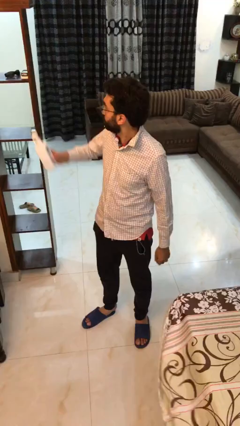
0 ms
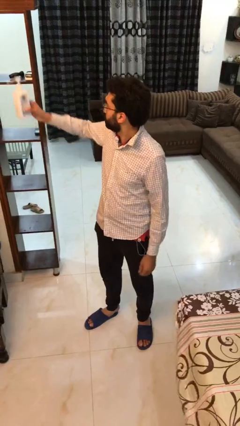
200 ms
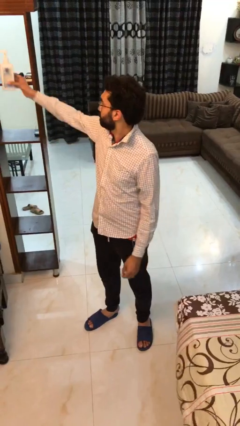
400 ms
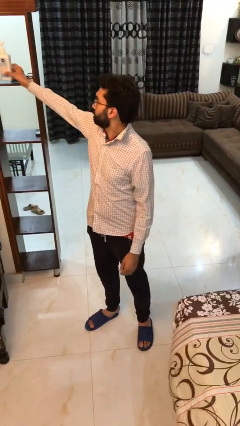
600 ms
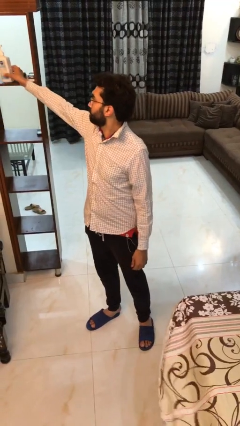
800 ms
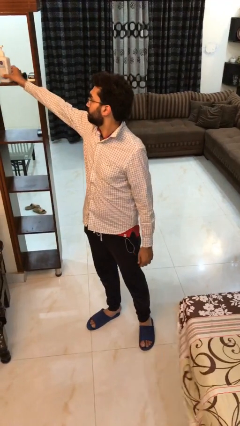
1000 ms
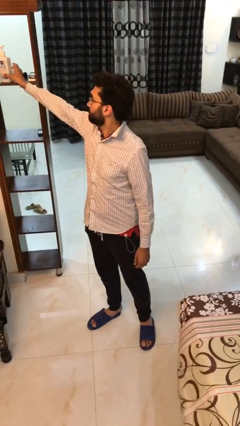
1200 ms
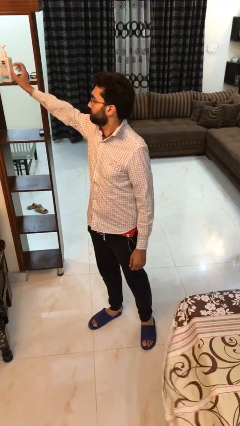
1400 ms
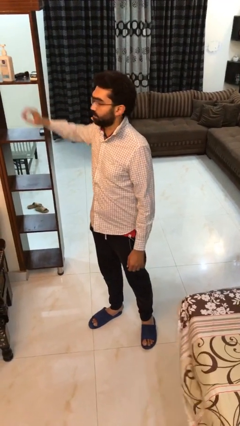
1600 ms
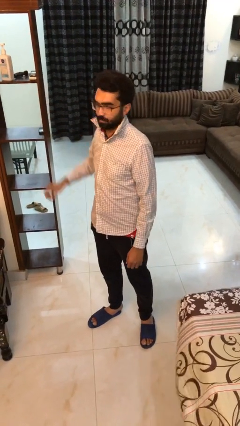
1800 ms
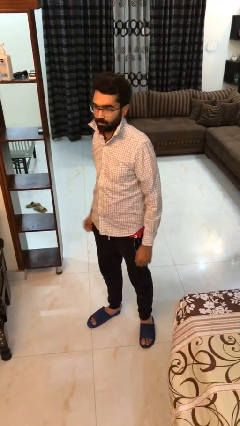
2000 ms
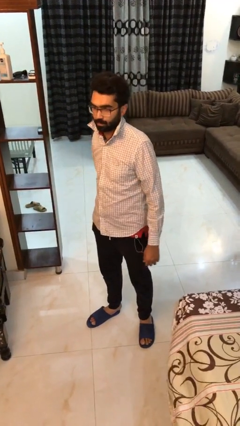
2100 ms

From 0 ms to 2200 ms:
person puts down object on shelf

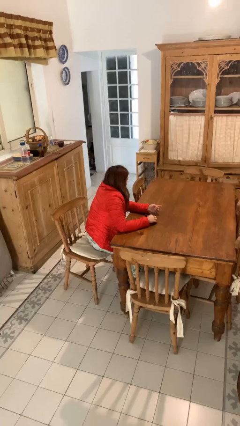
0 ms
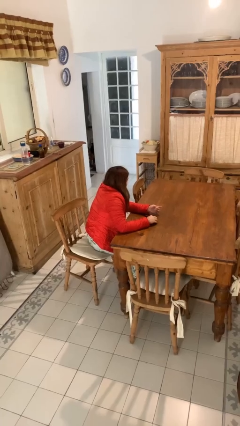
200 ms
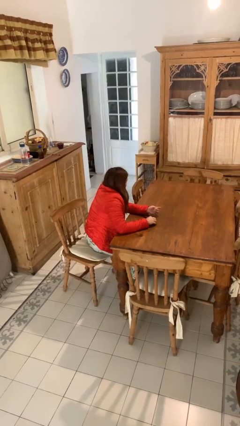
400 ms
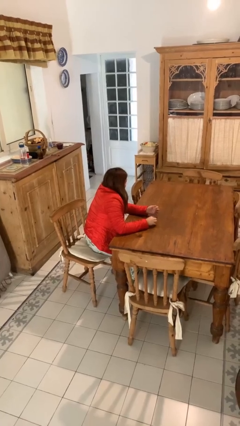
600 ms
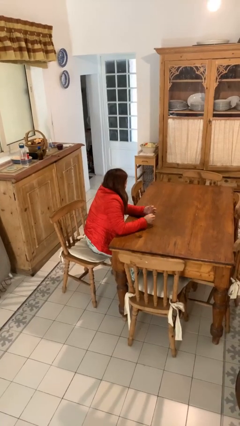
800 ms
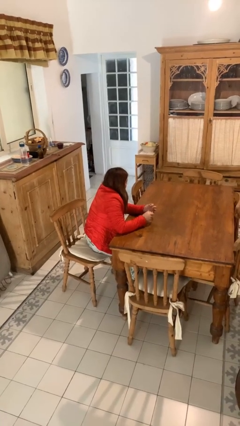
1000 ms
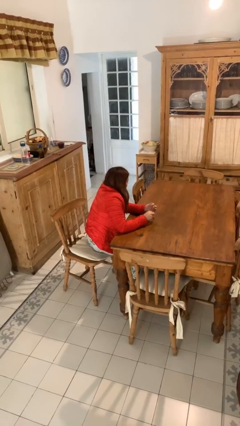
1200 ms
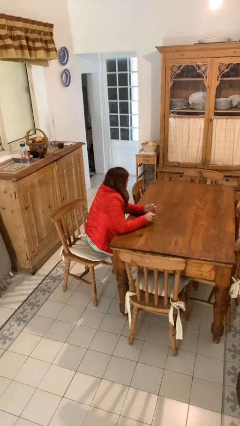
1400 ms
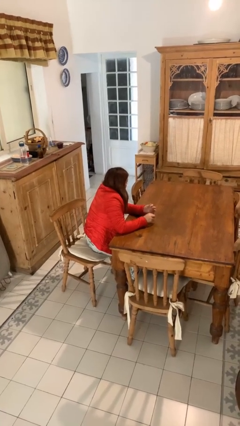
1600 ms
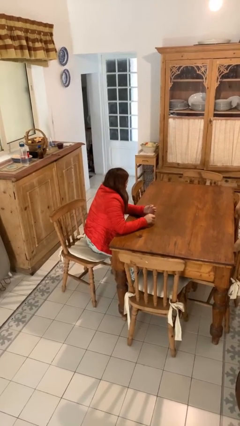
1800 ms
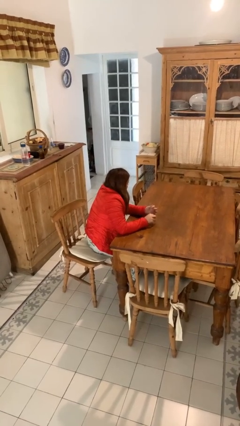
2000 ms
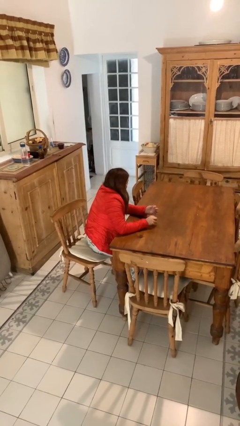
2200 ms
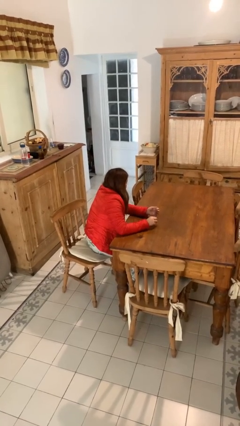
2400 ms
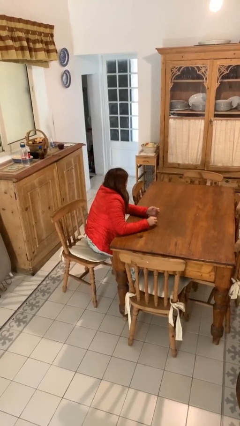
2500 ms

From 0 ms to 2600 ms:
person files fingernails

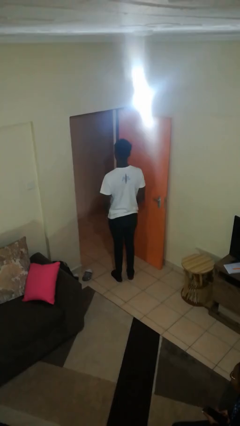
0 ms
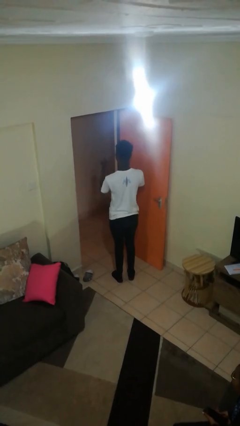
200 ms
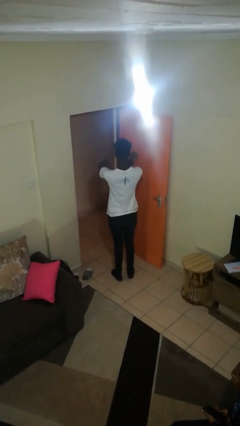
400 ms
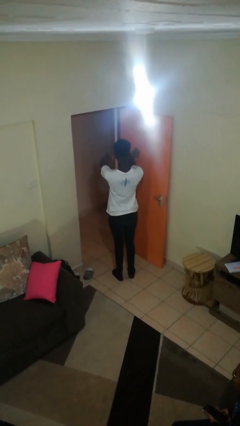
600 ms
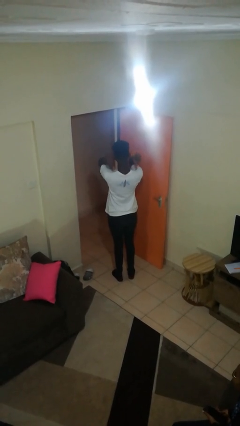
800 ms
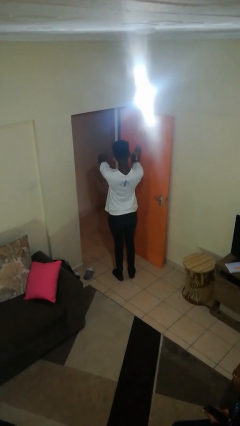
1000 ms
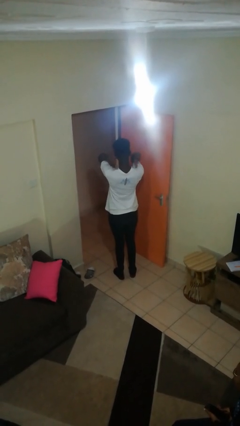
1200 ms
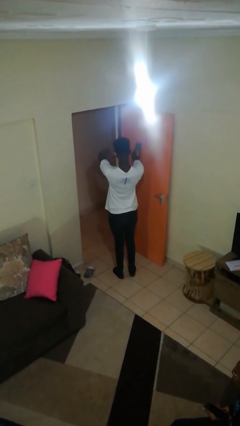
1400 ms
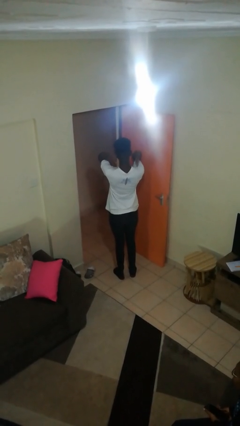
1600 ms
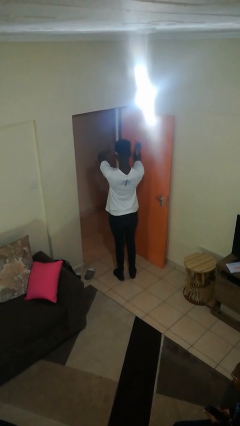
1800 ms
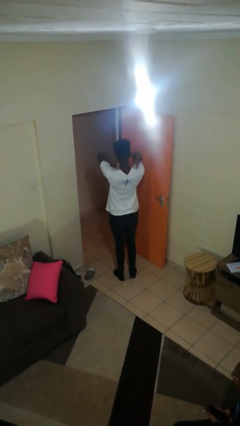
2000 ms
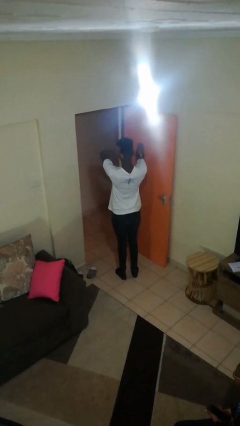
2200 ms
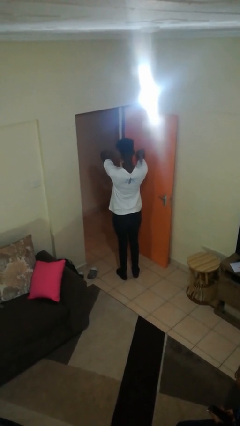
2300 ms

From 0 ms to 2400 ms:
person gestures behind me

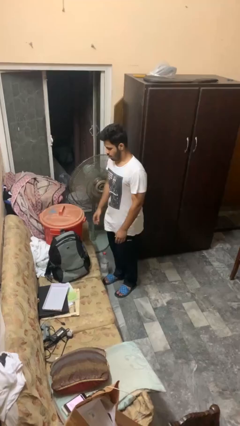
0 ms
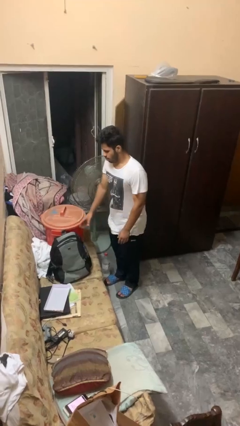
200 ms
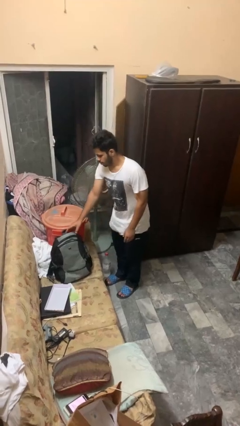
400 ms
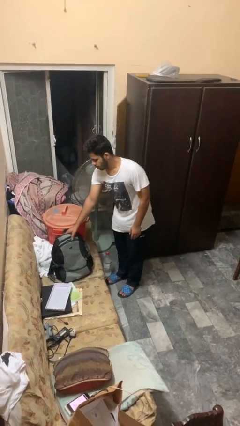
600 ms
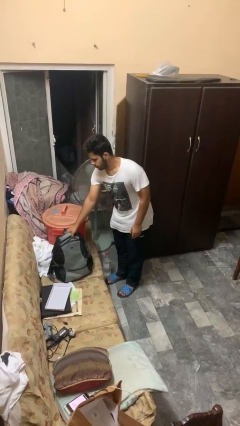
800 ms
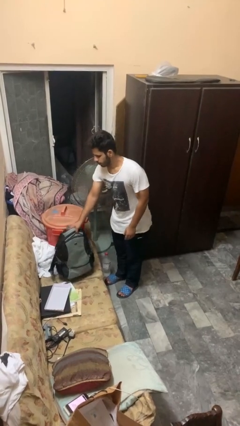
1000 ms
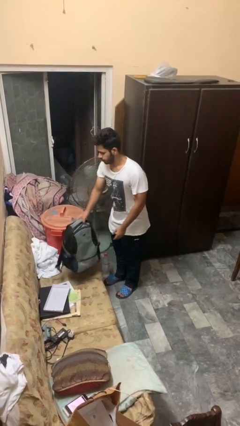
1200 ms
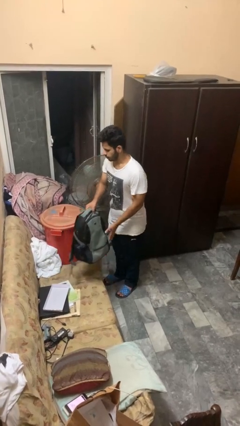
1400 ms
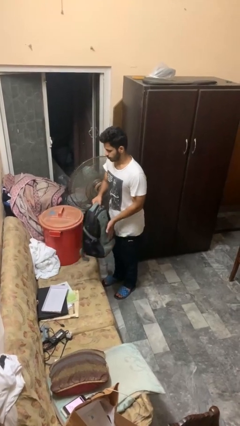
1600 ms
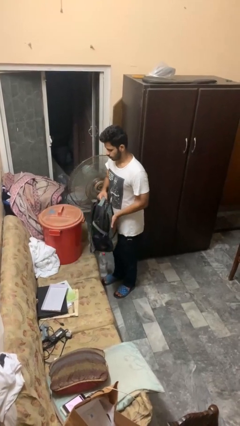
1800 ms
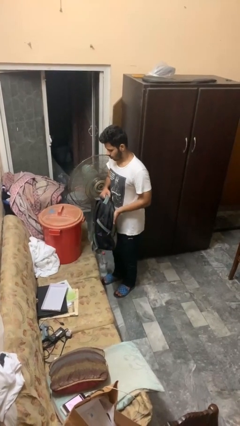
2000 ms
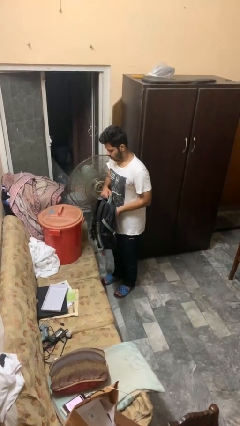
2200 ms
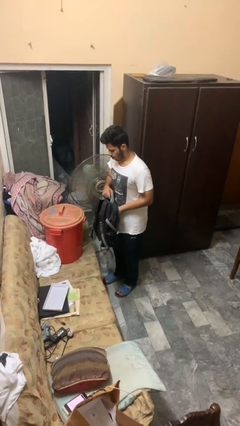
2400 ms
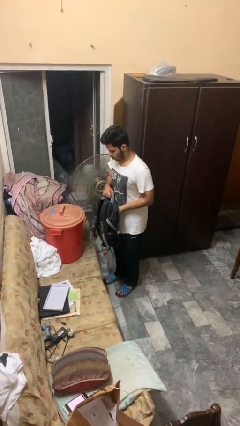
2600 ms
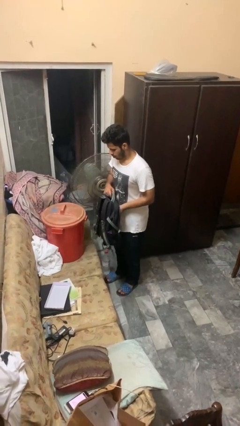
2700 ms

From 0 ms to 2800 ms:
person picks up object from couch

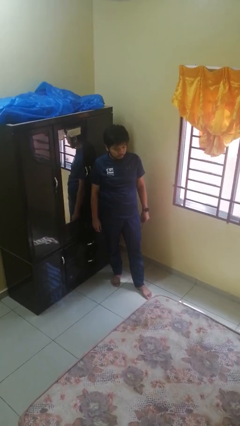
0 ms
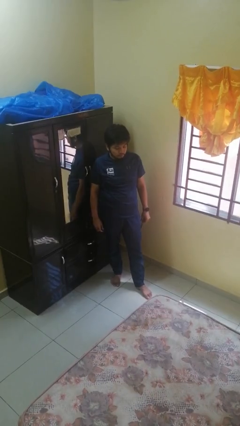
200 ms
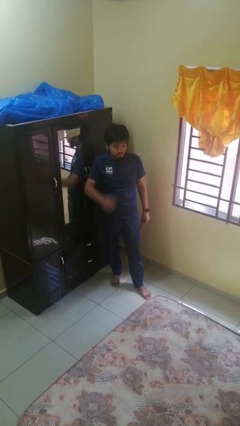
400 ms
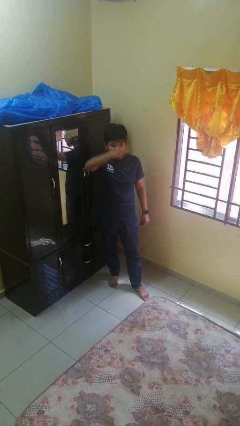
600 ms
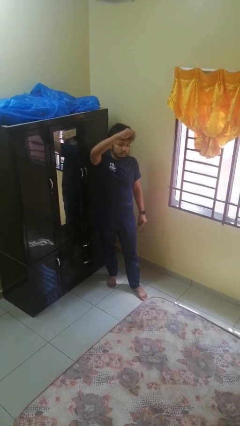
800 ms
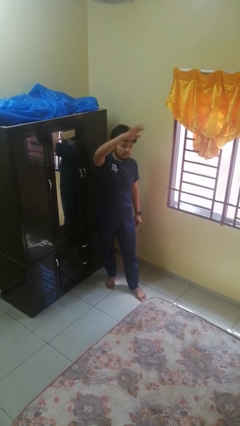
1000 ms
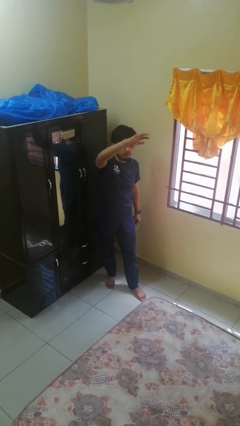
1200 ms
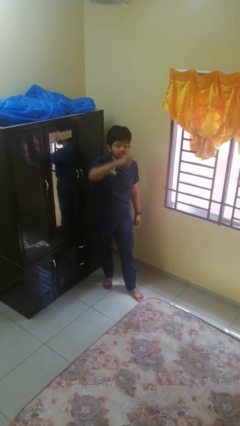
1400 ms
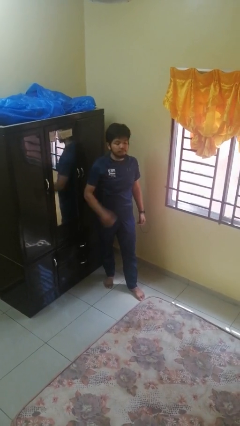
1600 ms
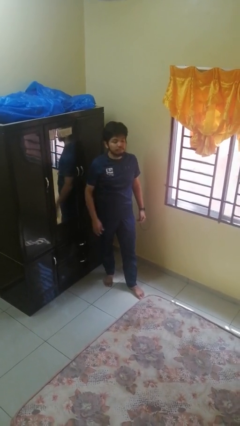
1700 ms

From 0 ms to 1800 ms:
person gestures come here

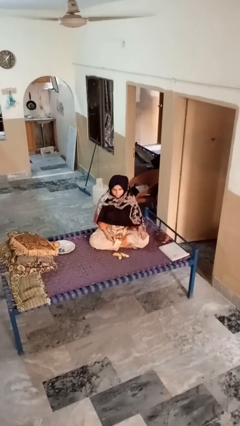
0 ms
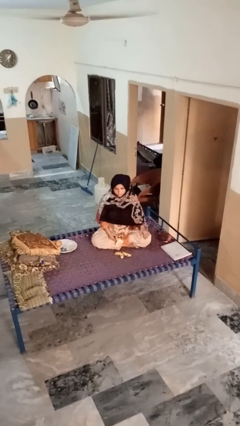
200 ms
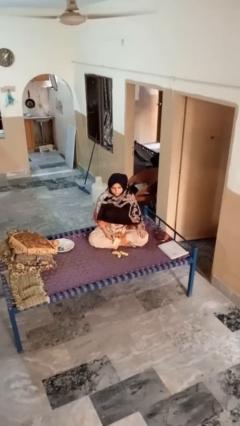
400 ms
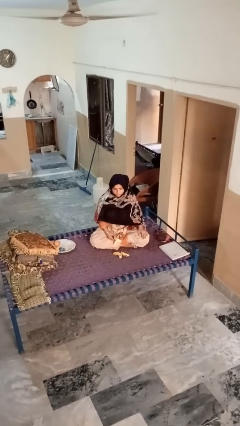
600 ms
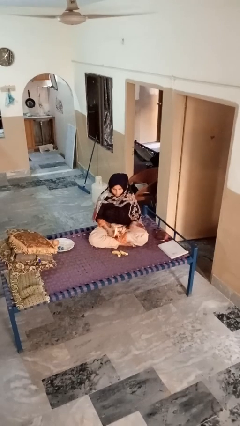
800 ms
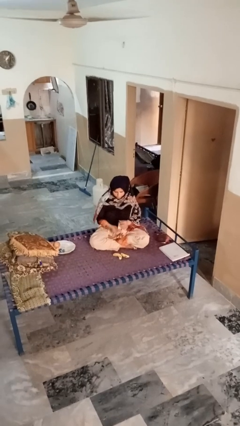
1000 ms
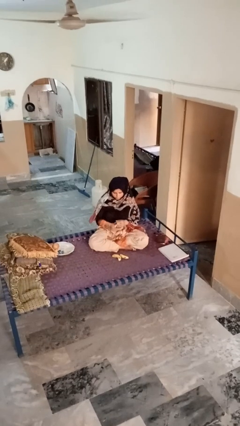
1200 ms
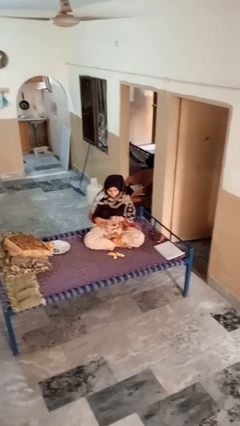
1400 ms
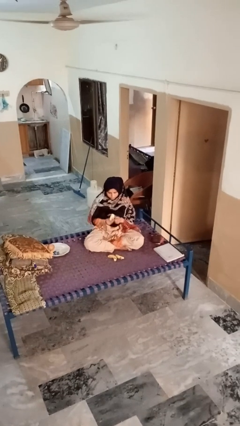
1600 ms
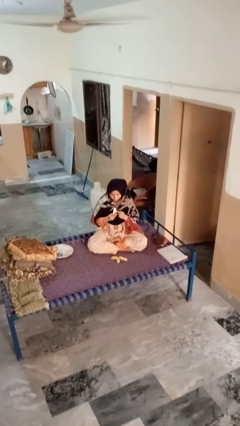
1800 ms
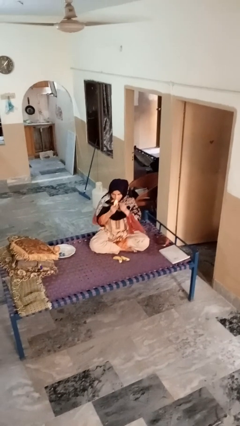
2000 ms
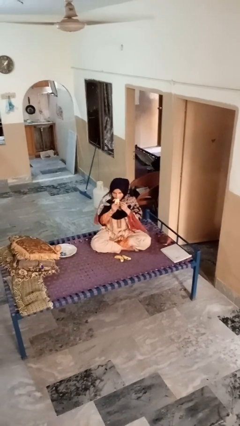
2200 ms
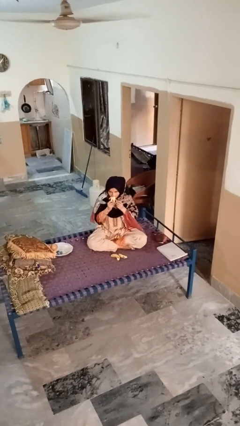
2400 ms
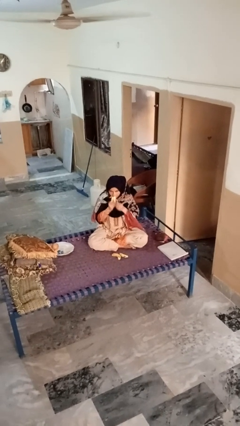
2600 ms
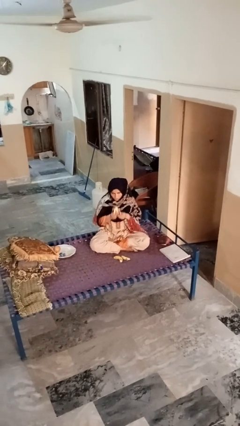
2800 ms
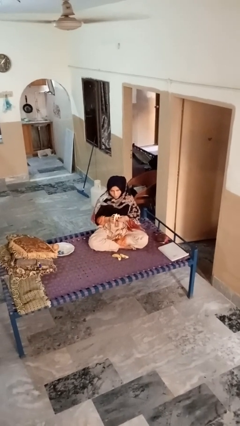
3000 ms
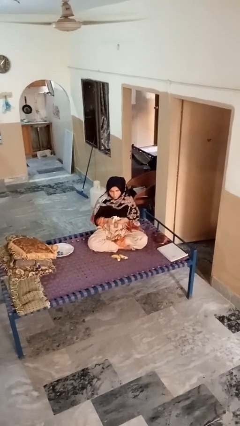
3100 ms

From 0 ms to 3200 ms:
person eats banana

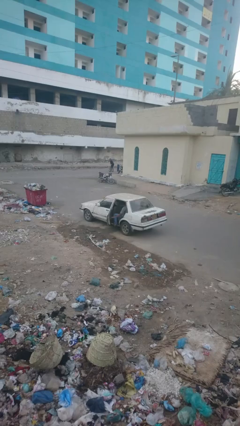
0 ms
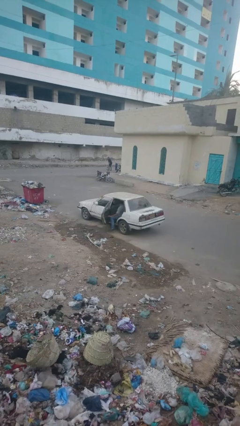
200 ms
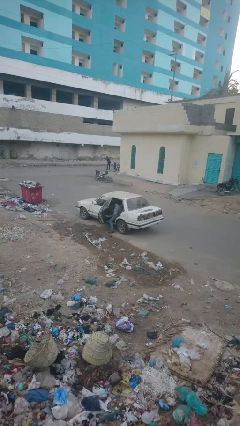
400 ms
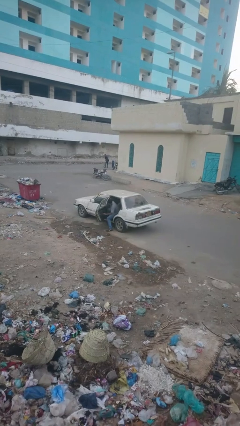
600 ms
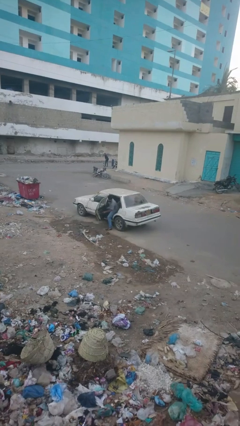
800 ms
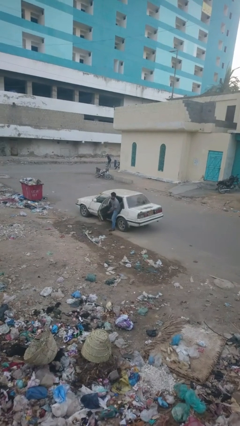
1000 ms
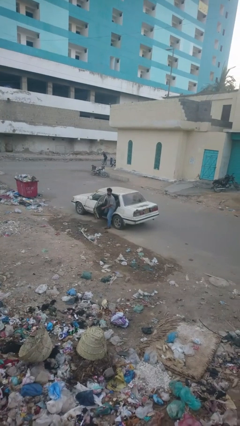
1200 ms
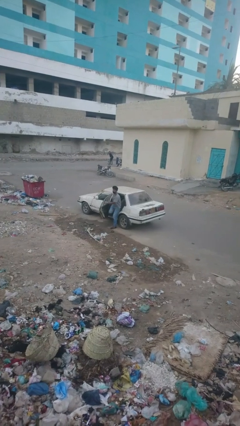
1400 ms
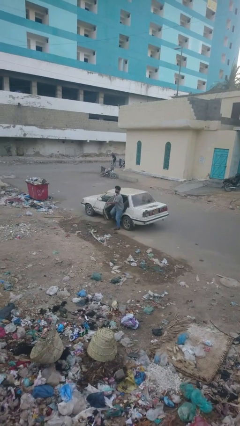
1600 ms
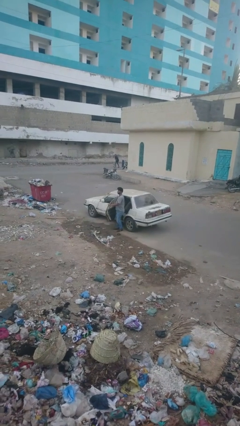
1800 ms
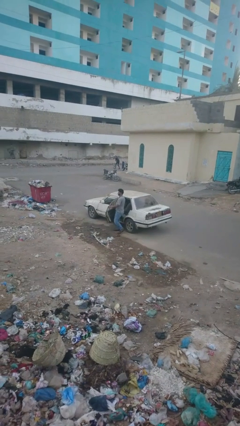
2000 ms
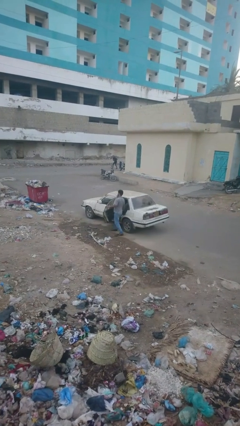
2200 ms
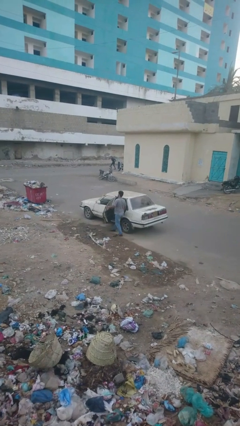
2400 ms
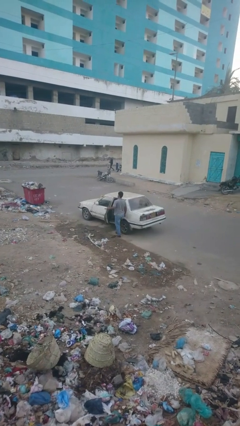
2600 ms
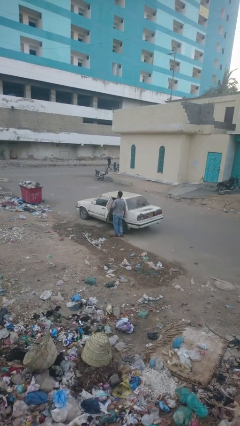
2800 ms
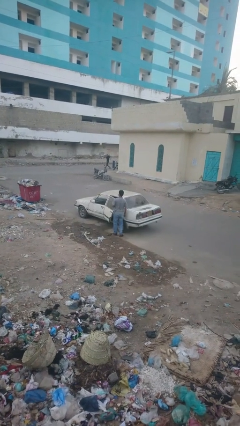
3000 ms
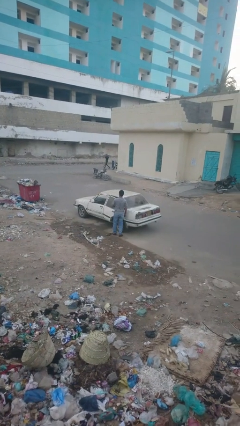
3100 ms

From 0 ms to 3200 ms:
car drops off person
